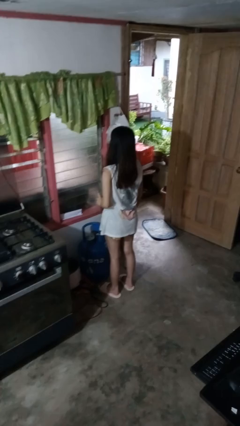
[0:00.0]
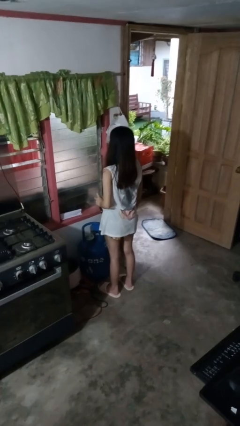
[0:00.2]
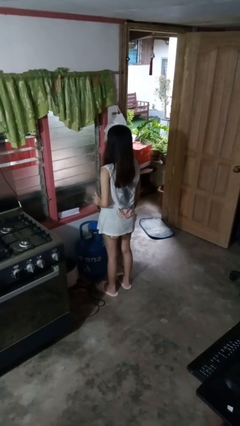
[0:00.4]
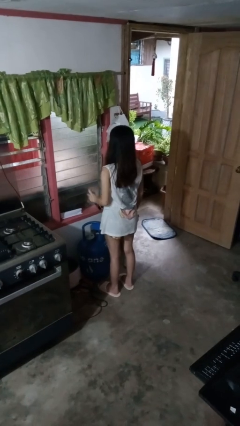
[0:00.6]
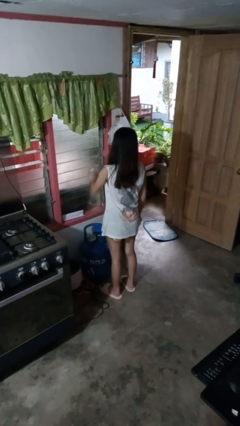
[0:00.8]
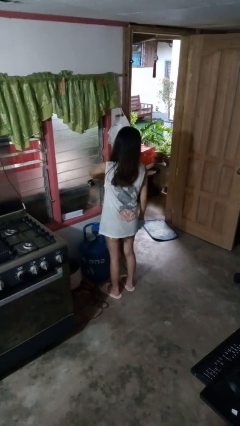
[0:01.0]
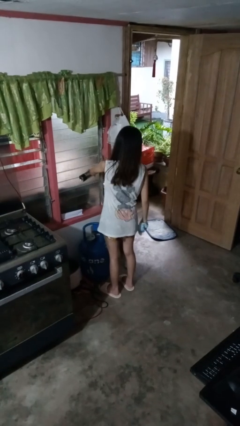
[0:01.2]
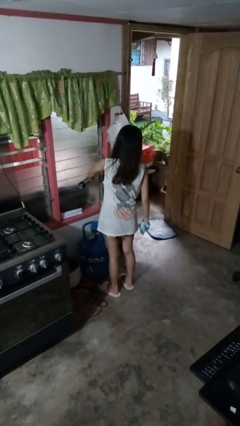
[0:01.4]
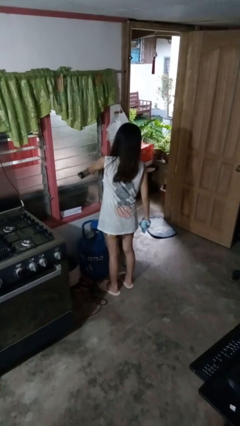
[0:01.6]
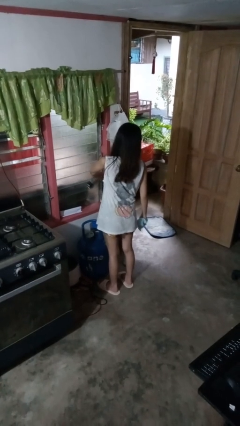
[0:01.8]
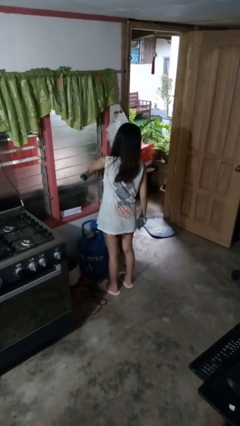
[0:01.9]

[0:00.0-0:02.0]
person sprays from bottle

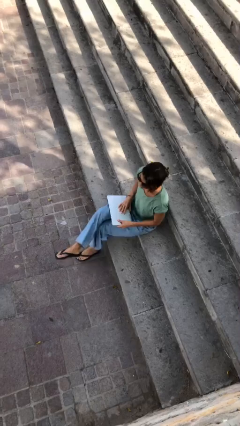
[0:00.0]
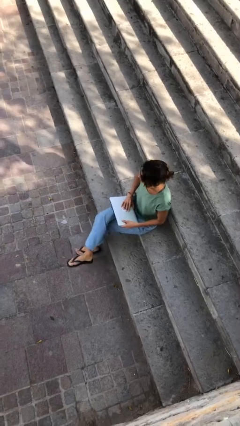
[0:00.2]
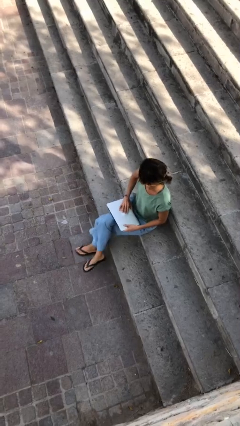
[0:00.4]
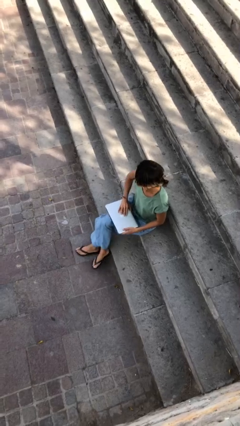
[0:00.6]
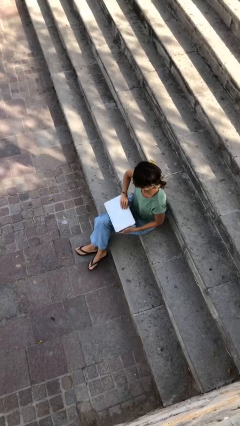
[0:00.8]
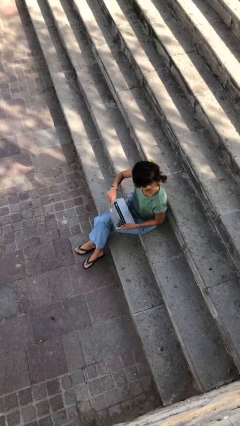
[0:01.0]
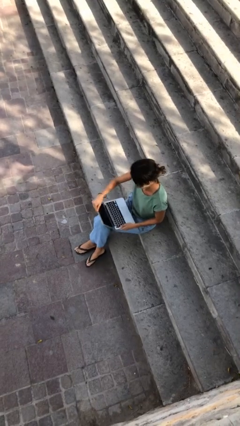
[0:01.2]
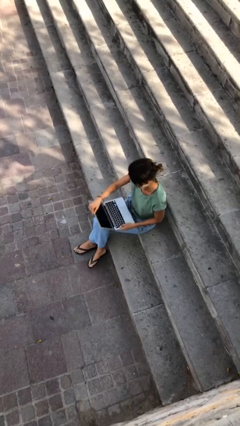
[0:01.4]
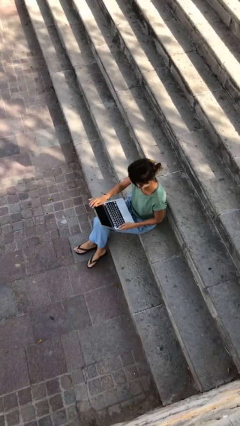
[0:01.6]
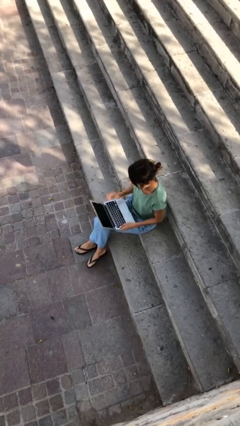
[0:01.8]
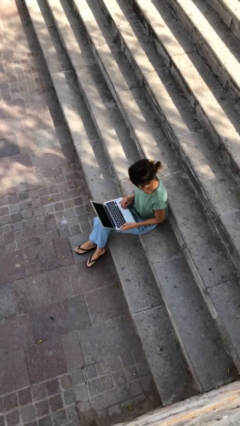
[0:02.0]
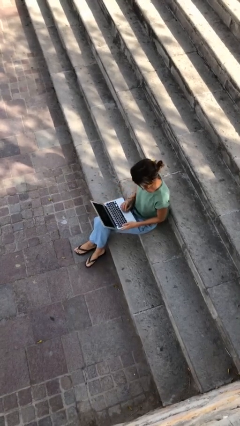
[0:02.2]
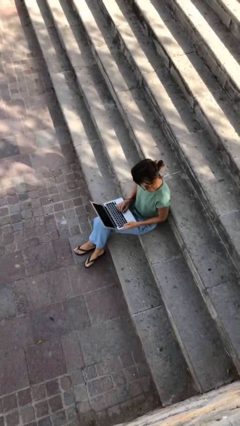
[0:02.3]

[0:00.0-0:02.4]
person interacts with laptop

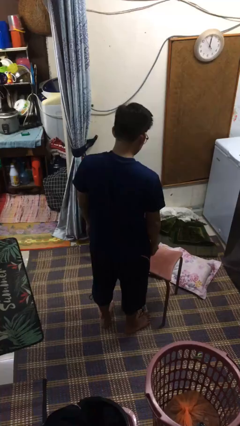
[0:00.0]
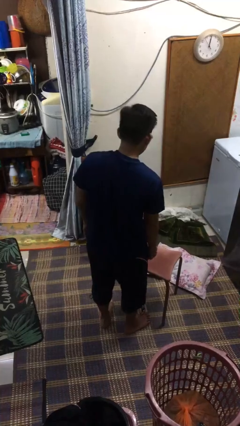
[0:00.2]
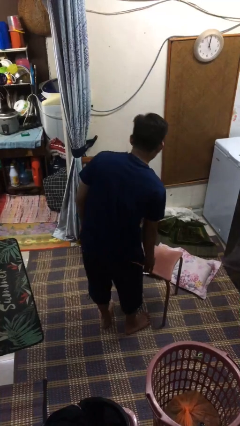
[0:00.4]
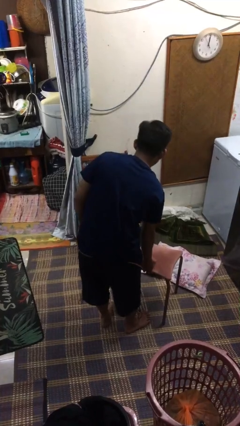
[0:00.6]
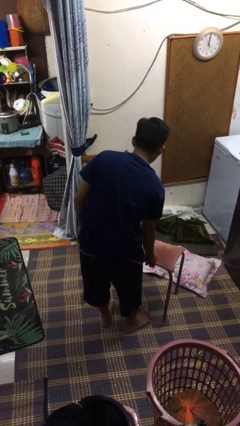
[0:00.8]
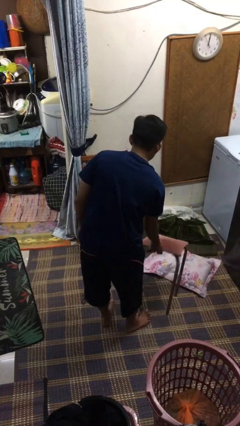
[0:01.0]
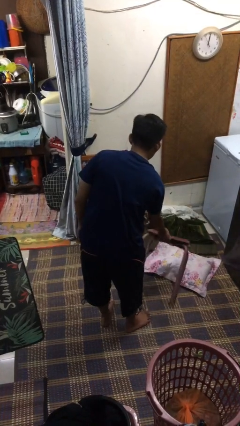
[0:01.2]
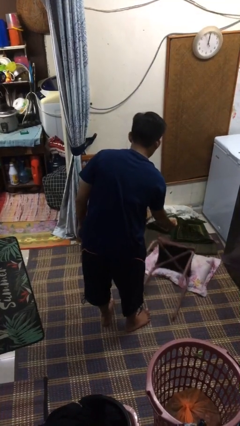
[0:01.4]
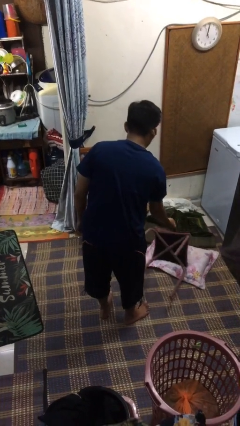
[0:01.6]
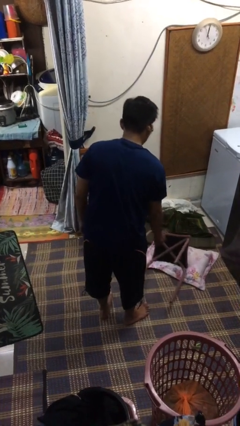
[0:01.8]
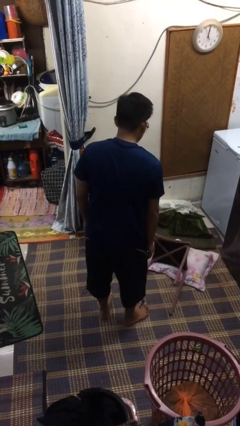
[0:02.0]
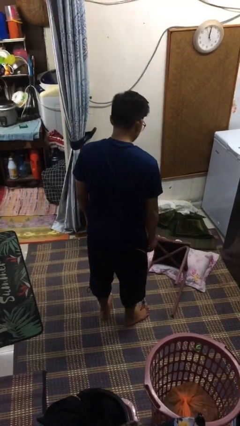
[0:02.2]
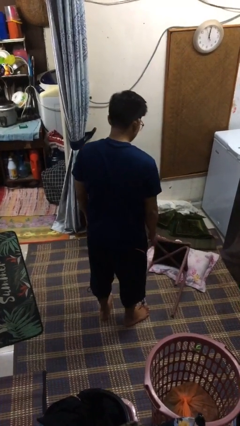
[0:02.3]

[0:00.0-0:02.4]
person knocks over furniture

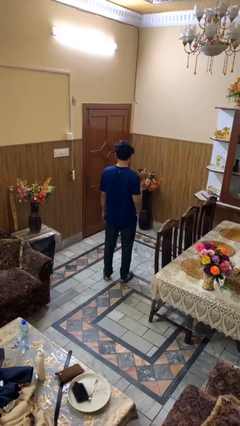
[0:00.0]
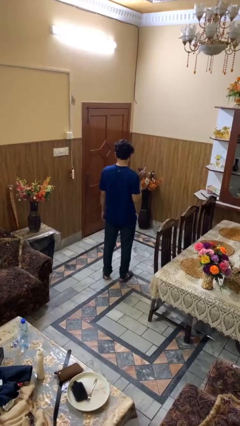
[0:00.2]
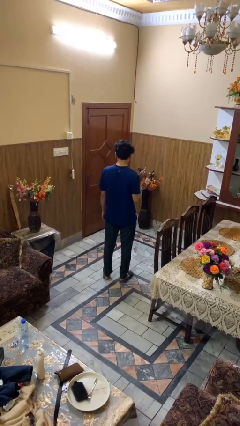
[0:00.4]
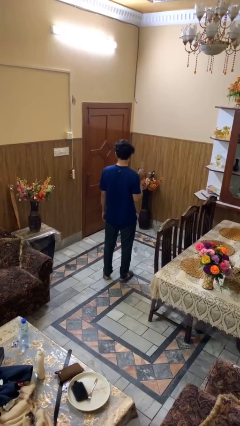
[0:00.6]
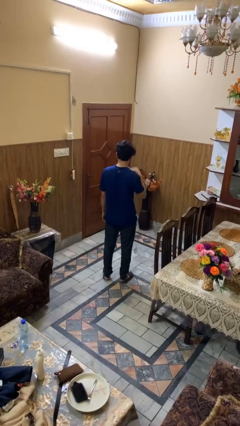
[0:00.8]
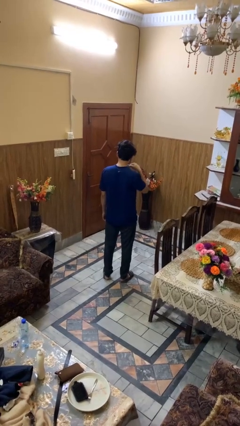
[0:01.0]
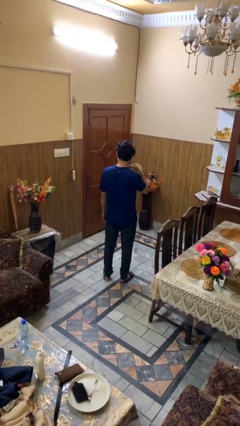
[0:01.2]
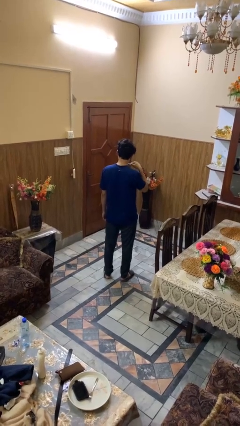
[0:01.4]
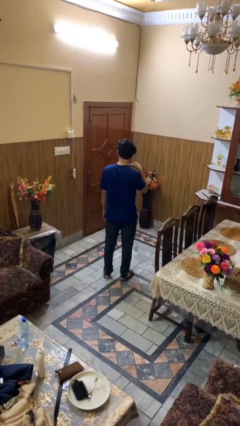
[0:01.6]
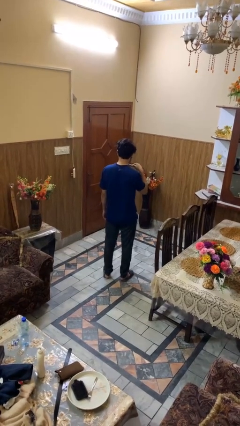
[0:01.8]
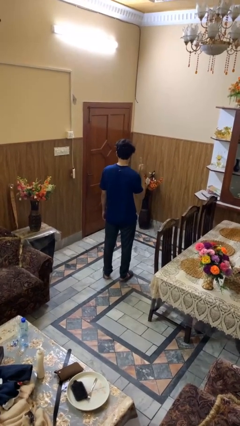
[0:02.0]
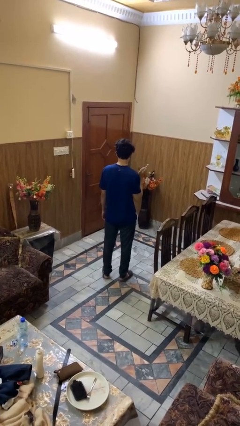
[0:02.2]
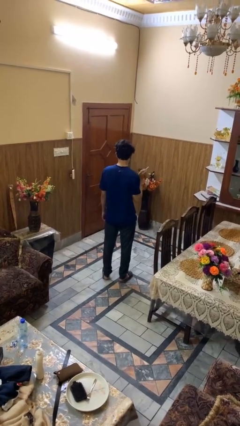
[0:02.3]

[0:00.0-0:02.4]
person brushes teeth

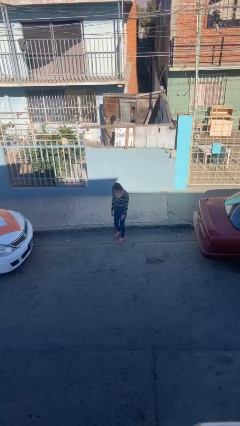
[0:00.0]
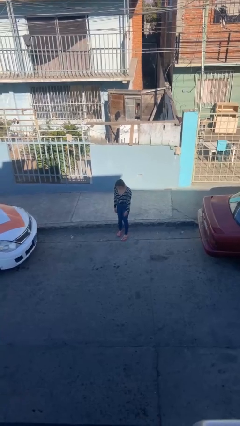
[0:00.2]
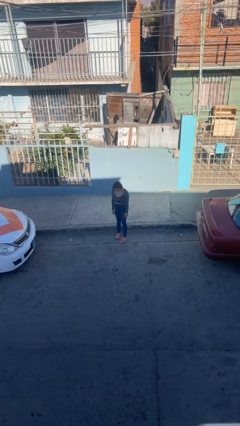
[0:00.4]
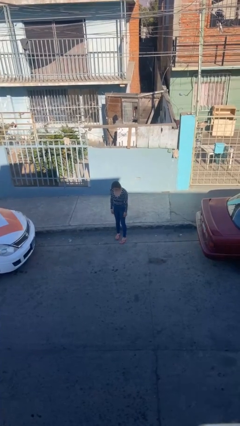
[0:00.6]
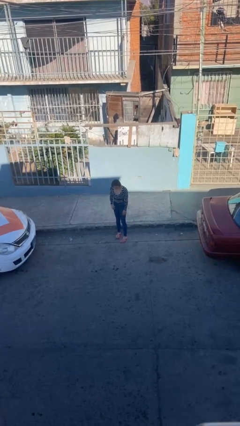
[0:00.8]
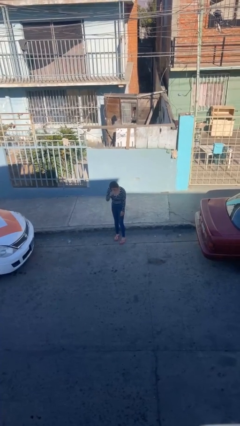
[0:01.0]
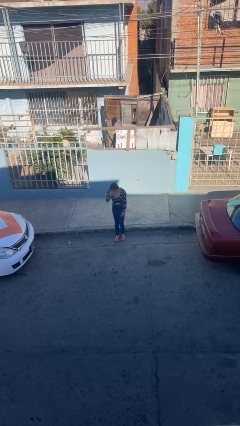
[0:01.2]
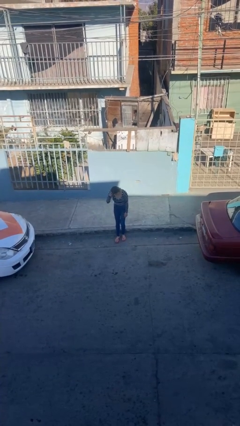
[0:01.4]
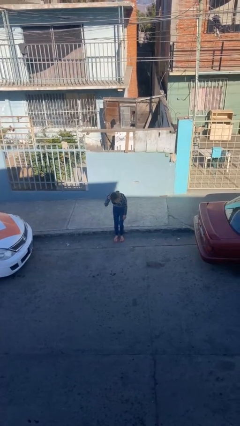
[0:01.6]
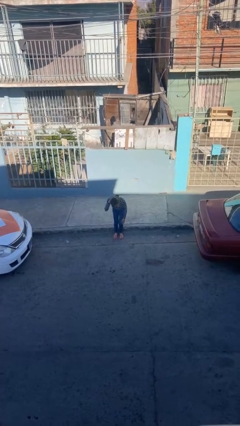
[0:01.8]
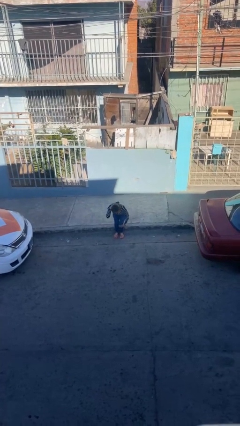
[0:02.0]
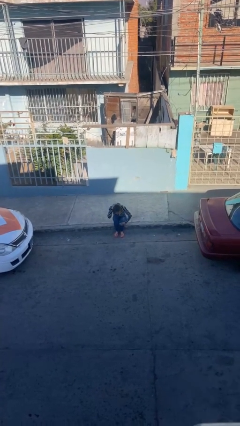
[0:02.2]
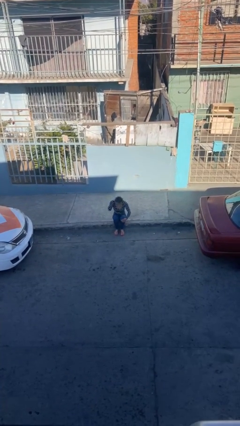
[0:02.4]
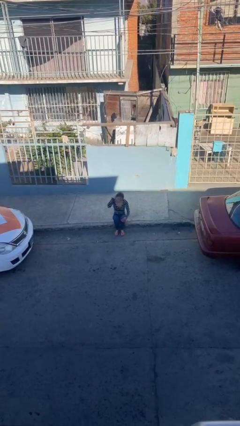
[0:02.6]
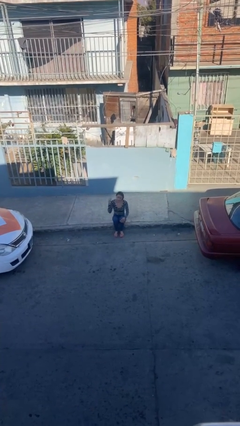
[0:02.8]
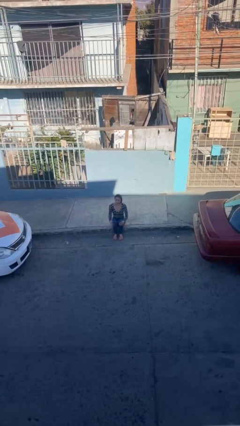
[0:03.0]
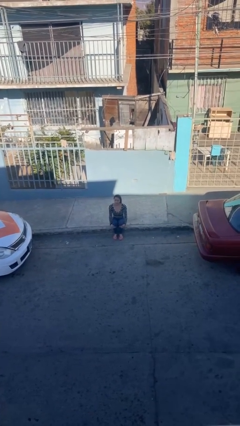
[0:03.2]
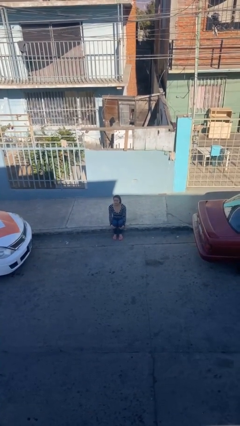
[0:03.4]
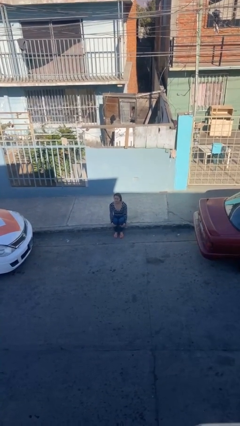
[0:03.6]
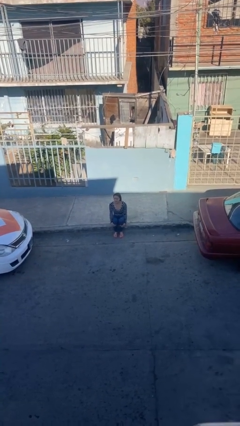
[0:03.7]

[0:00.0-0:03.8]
person sits down

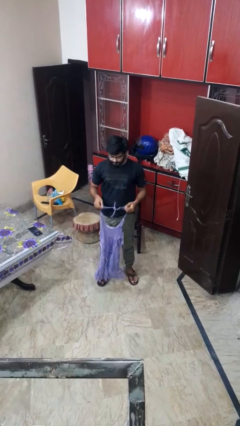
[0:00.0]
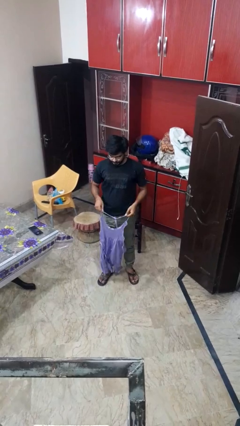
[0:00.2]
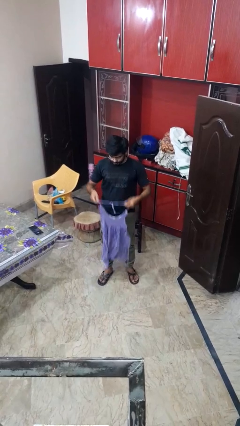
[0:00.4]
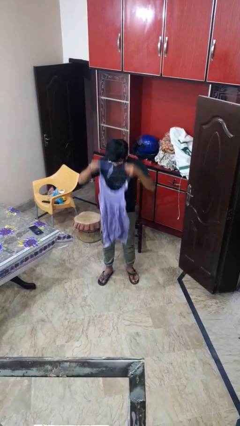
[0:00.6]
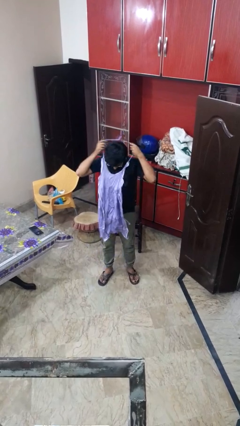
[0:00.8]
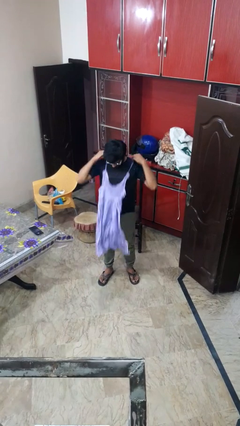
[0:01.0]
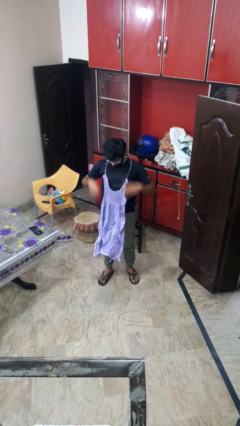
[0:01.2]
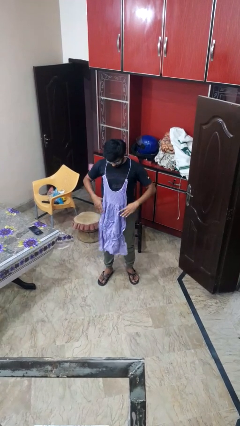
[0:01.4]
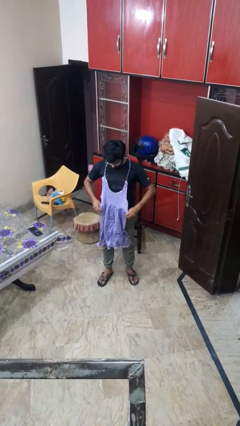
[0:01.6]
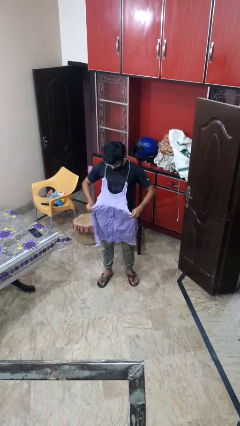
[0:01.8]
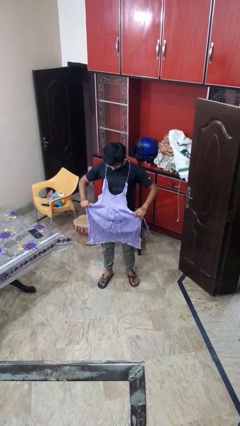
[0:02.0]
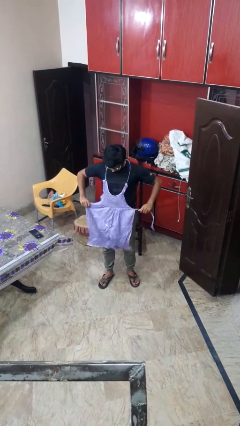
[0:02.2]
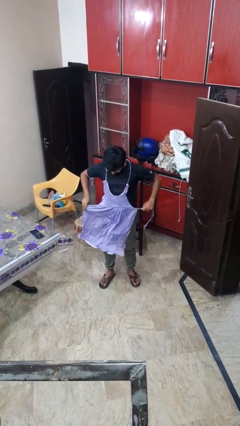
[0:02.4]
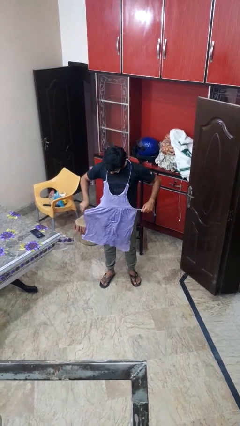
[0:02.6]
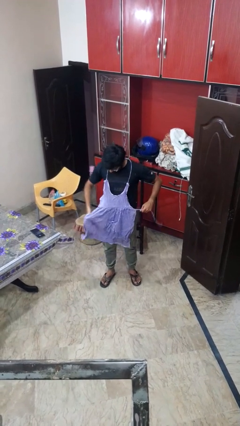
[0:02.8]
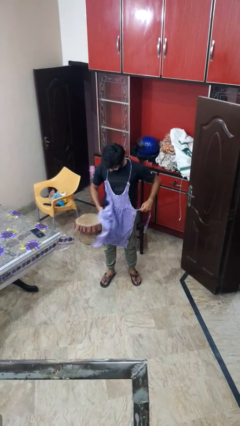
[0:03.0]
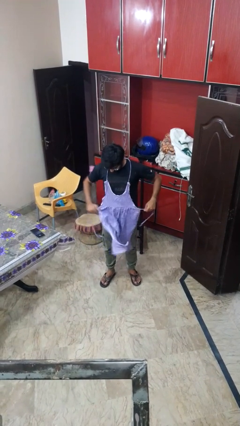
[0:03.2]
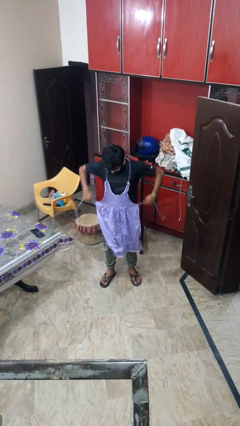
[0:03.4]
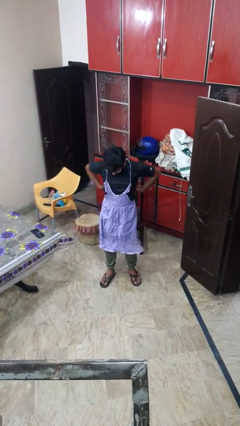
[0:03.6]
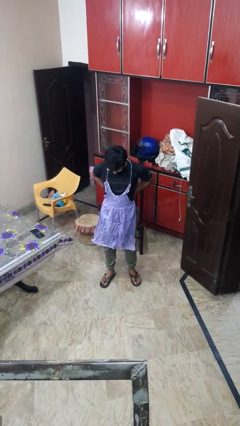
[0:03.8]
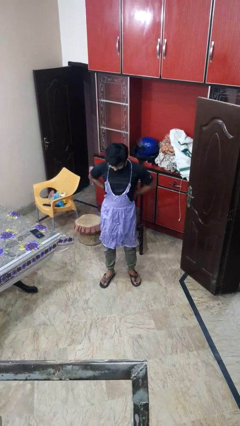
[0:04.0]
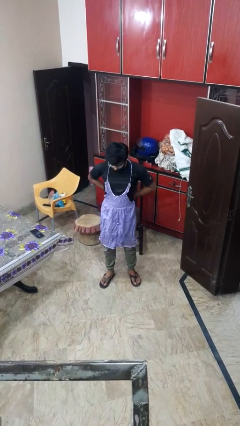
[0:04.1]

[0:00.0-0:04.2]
person puts on apron
